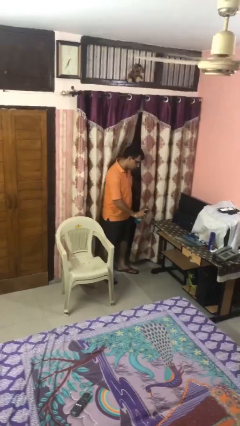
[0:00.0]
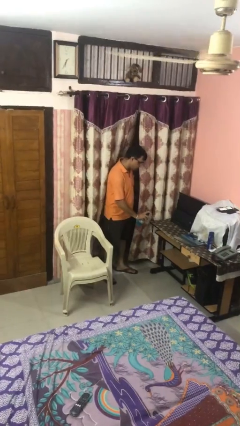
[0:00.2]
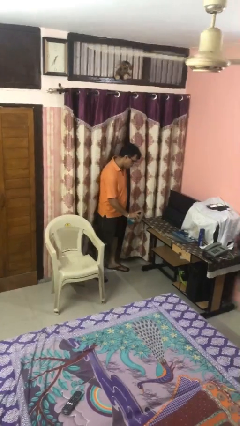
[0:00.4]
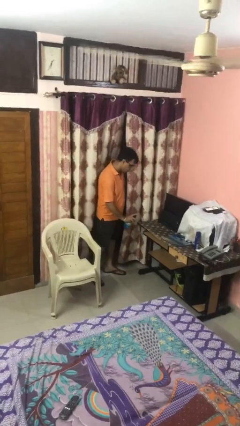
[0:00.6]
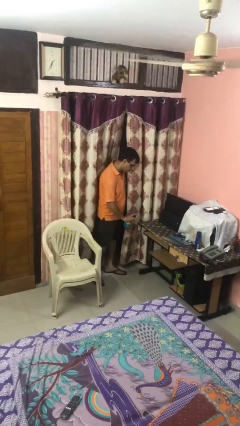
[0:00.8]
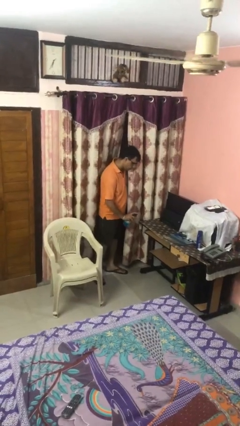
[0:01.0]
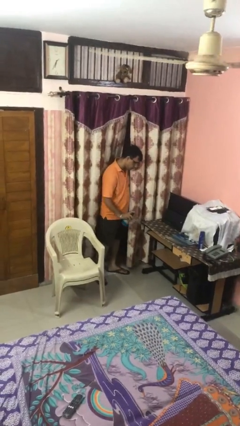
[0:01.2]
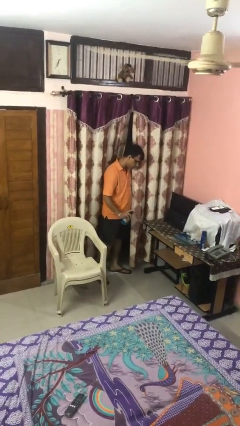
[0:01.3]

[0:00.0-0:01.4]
person sprays from bottle

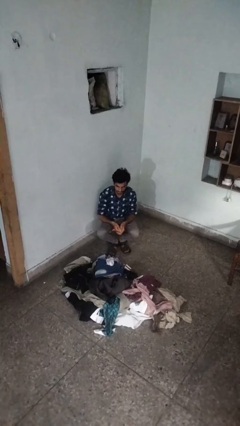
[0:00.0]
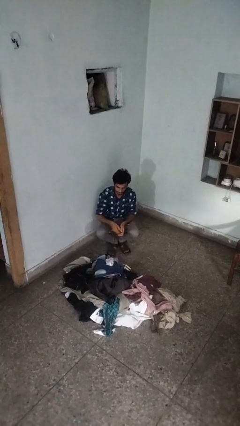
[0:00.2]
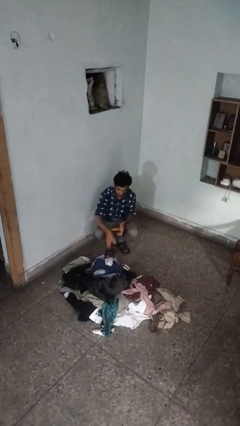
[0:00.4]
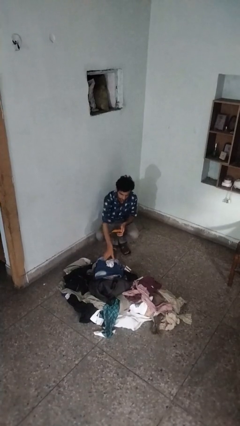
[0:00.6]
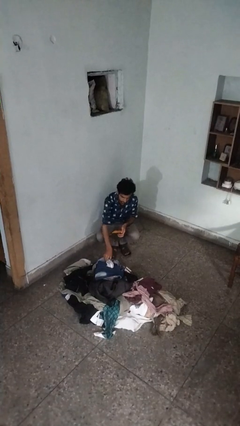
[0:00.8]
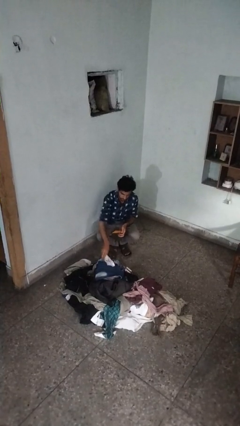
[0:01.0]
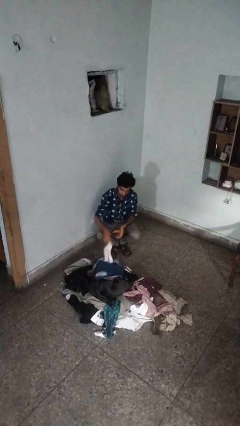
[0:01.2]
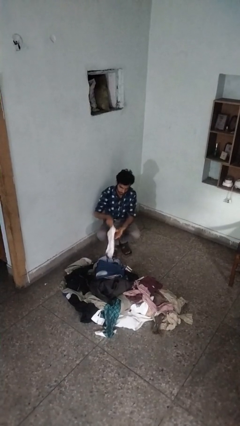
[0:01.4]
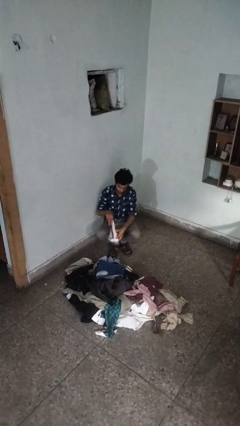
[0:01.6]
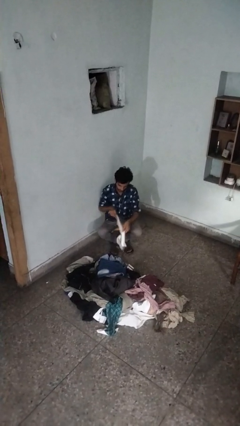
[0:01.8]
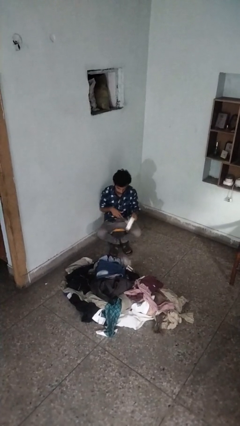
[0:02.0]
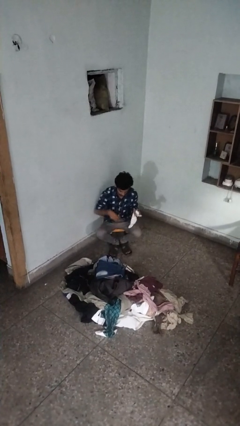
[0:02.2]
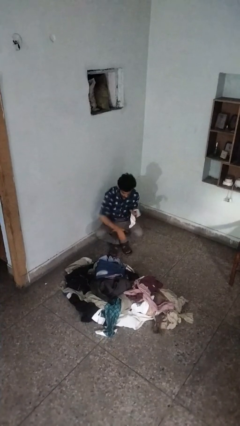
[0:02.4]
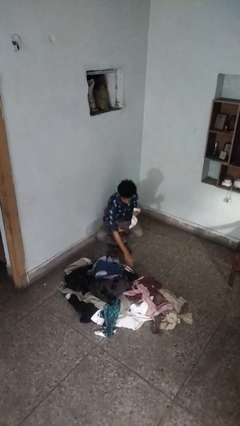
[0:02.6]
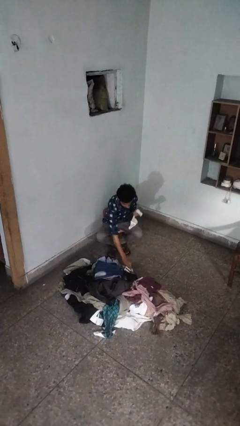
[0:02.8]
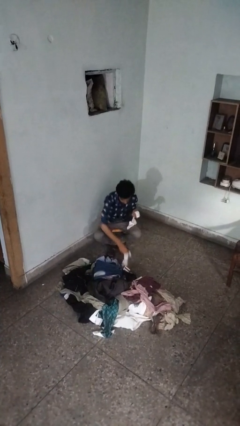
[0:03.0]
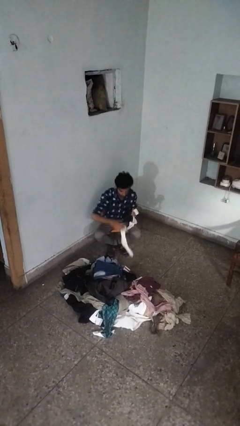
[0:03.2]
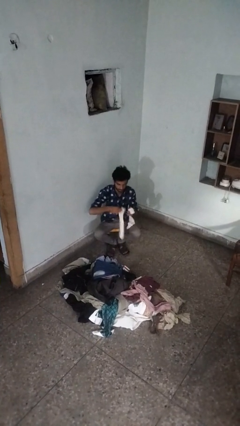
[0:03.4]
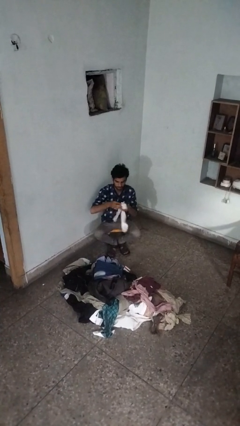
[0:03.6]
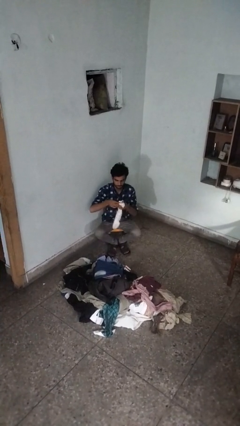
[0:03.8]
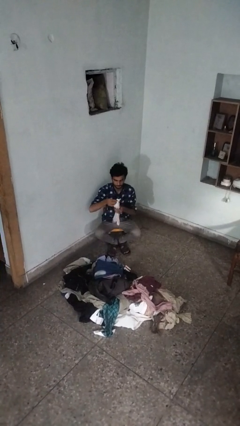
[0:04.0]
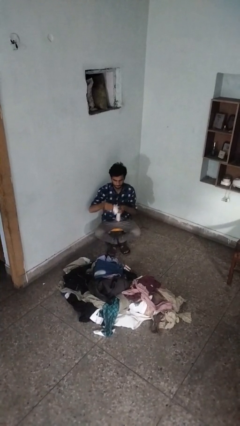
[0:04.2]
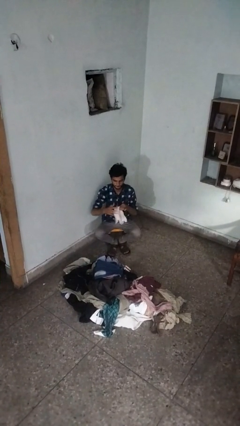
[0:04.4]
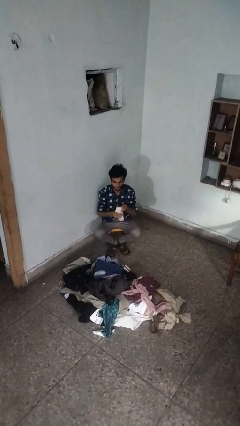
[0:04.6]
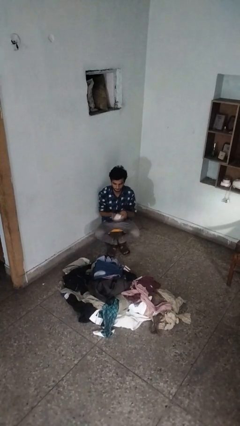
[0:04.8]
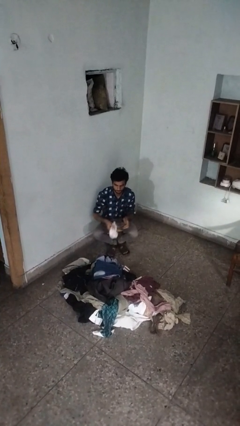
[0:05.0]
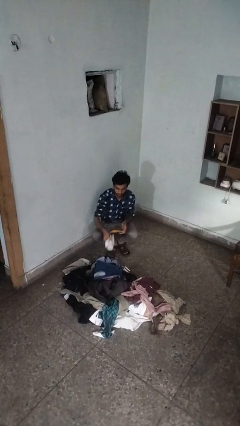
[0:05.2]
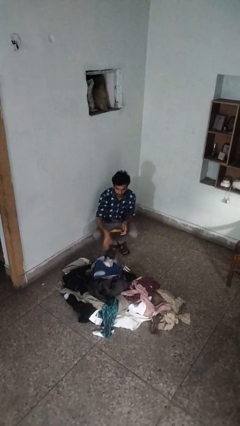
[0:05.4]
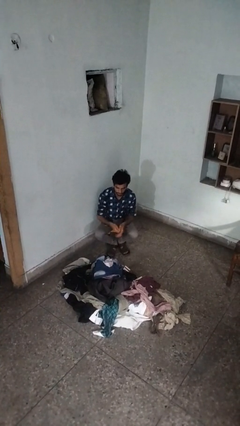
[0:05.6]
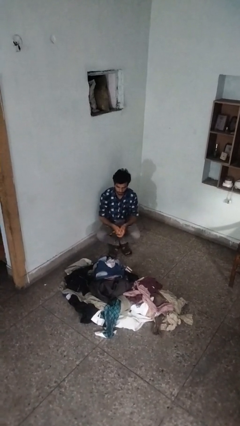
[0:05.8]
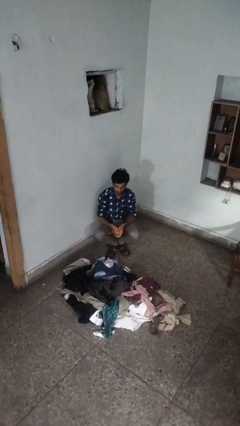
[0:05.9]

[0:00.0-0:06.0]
person folds socks

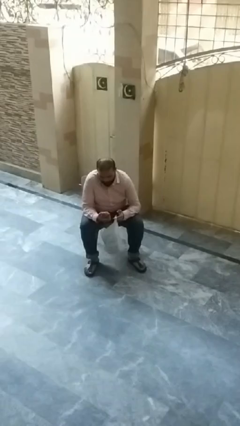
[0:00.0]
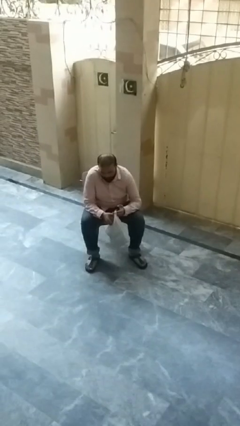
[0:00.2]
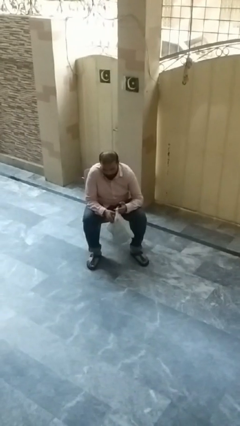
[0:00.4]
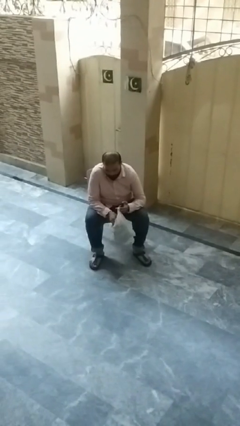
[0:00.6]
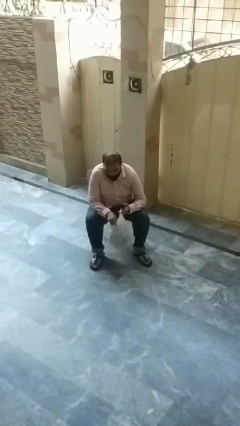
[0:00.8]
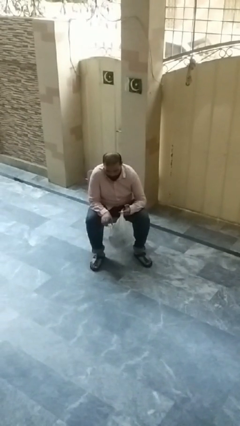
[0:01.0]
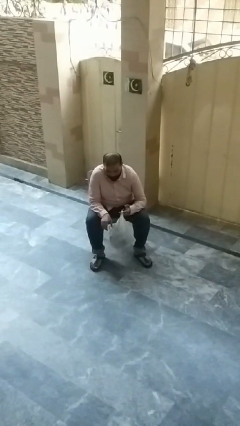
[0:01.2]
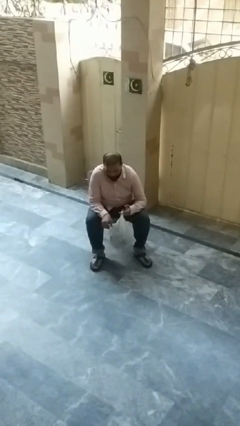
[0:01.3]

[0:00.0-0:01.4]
person puts object into bag

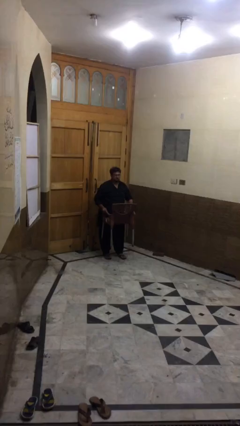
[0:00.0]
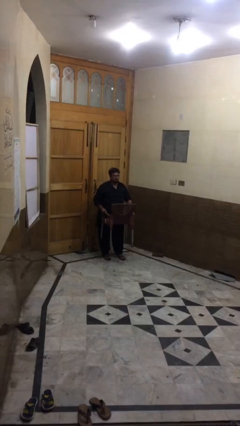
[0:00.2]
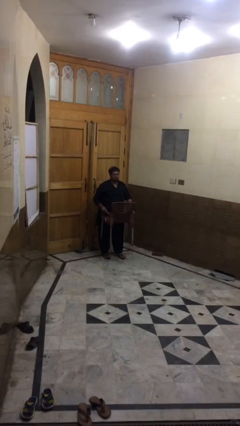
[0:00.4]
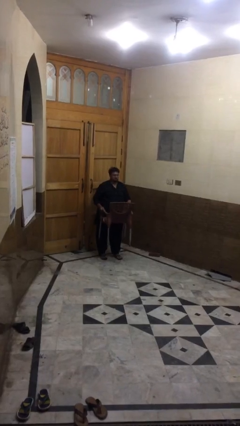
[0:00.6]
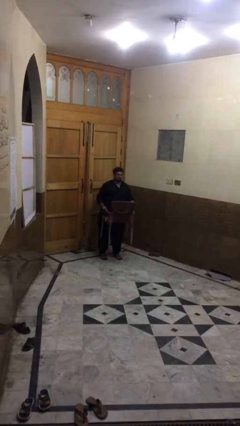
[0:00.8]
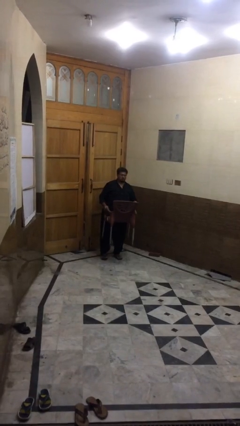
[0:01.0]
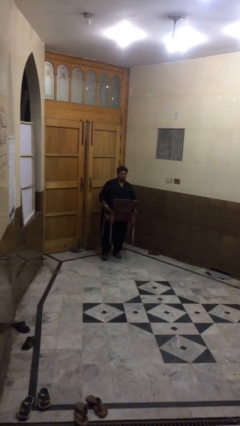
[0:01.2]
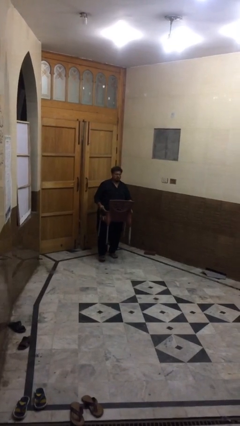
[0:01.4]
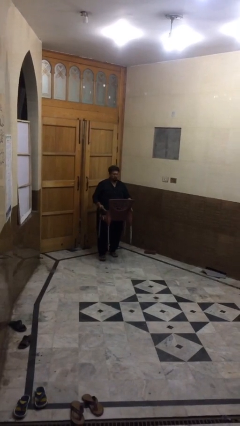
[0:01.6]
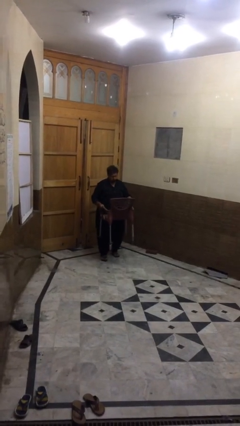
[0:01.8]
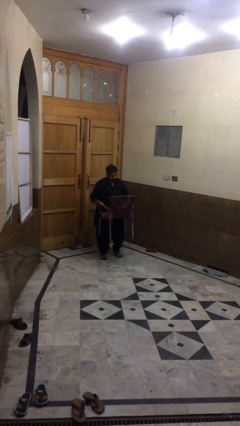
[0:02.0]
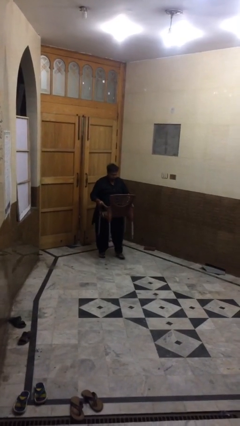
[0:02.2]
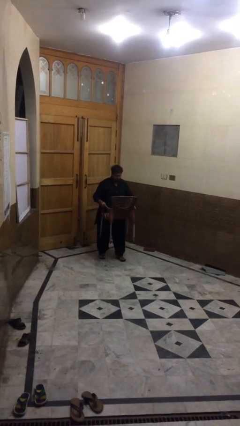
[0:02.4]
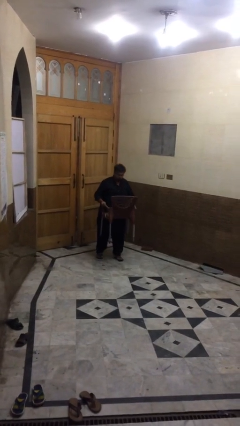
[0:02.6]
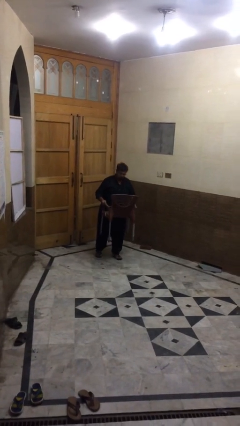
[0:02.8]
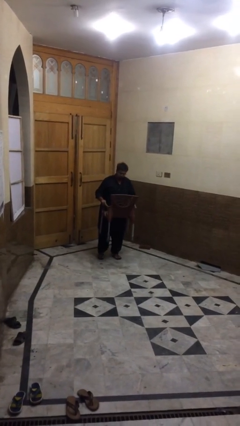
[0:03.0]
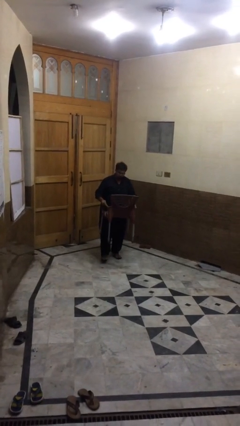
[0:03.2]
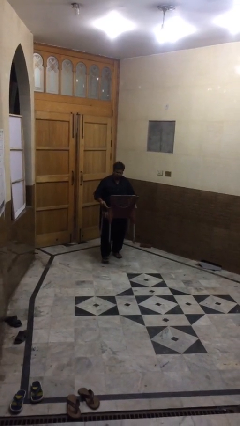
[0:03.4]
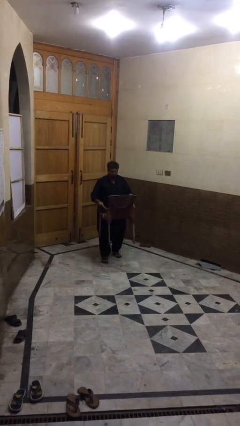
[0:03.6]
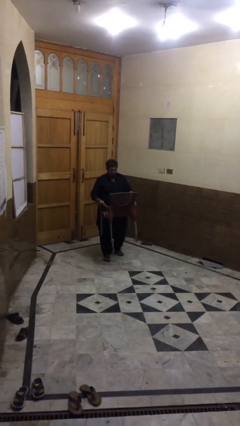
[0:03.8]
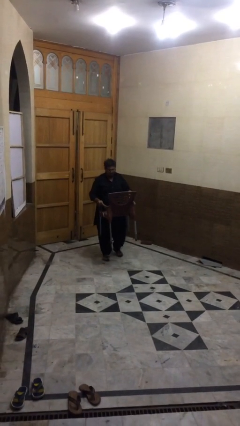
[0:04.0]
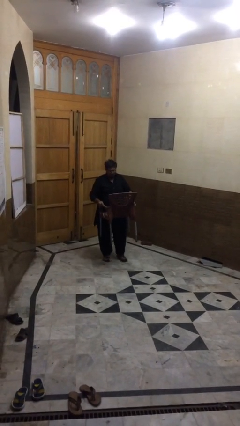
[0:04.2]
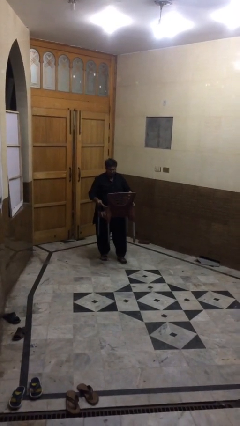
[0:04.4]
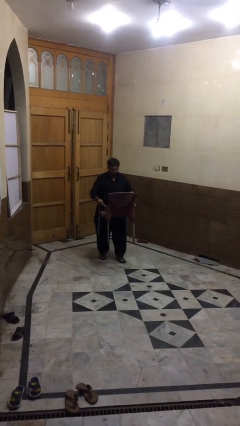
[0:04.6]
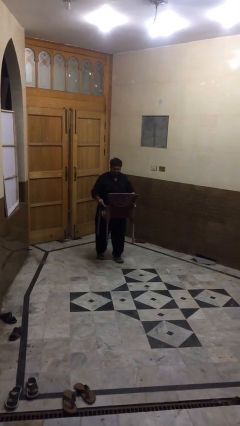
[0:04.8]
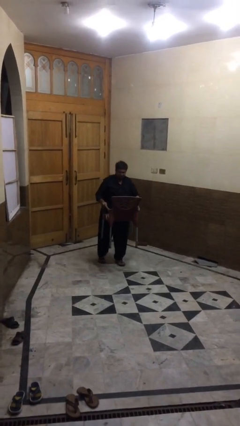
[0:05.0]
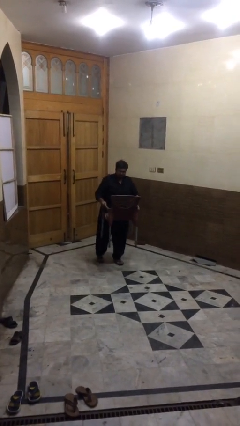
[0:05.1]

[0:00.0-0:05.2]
person carries heavy object

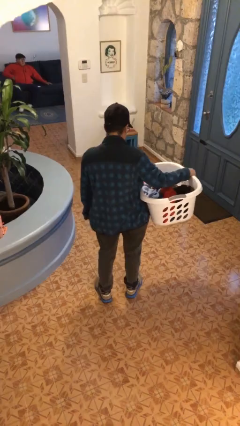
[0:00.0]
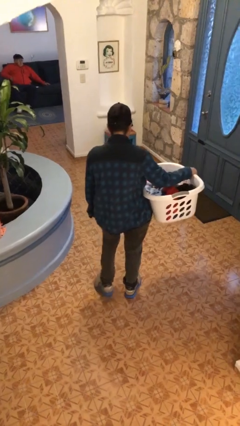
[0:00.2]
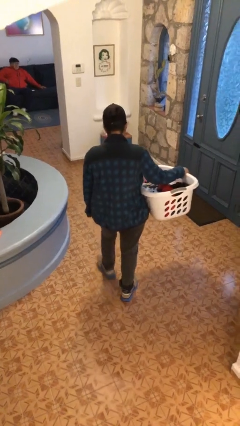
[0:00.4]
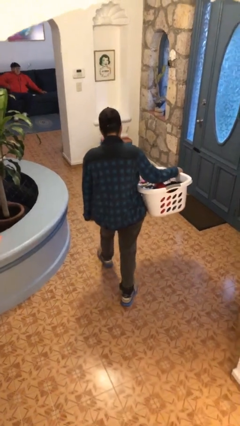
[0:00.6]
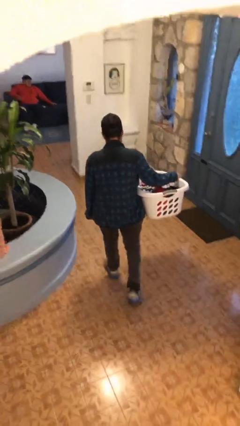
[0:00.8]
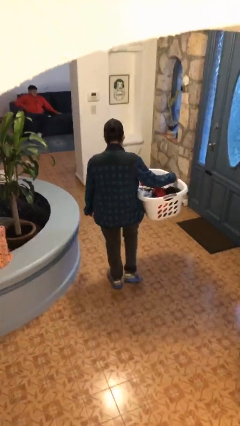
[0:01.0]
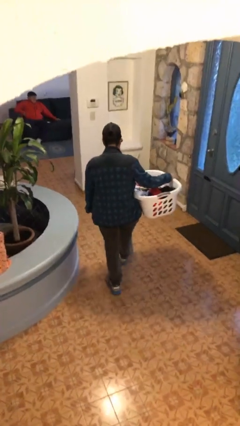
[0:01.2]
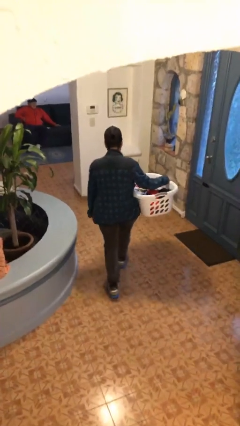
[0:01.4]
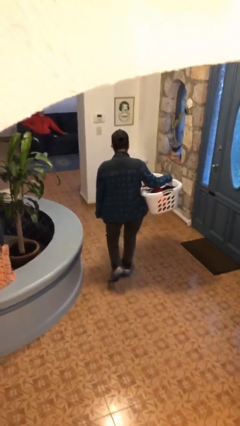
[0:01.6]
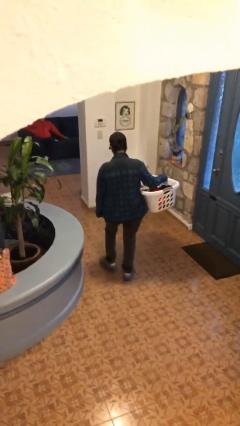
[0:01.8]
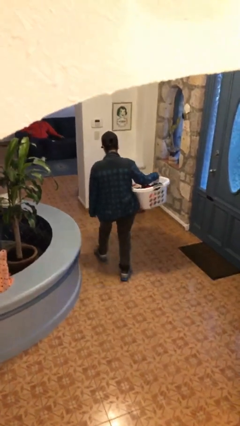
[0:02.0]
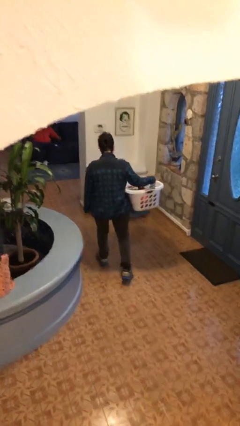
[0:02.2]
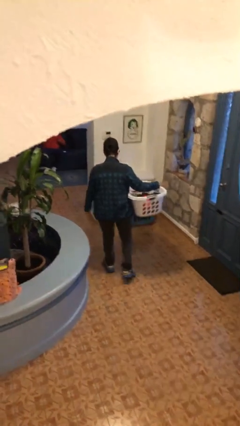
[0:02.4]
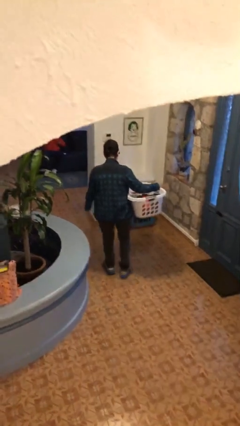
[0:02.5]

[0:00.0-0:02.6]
person carries laundry basket

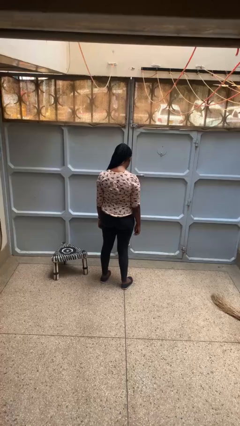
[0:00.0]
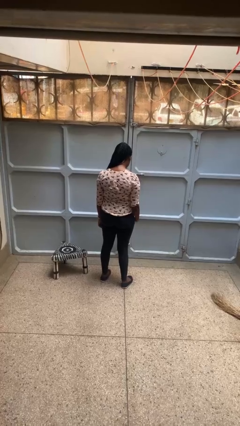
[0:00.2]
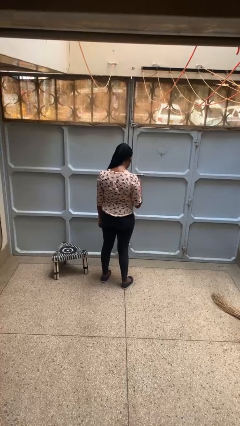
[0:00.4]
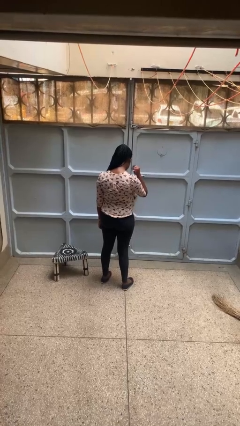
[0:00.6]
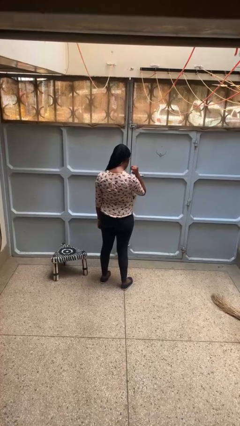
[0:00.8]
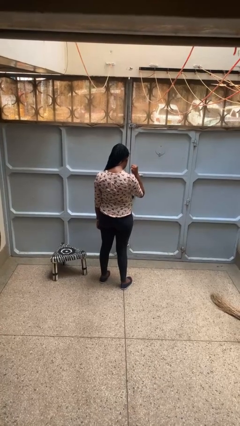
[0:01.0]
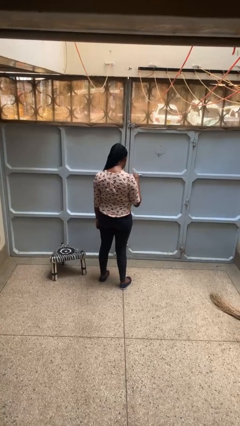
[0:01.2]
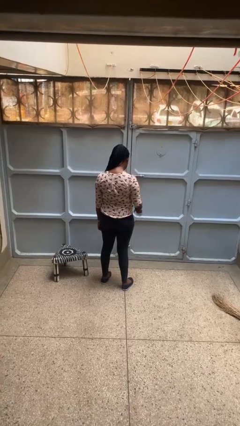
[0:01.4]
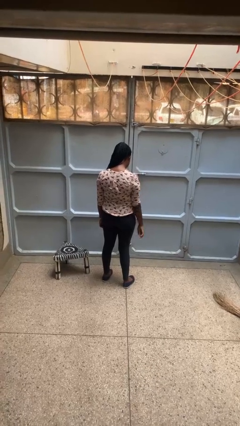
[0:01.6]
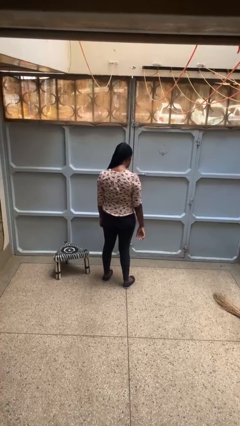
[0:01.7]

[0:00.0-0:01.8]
person gestures behind me
